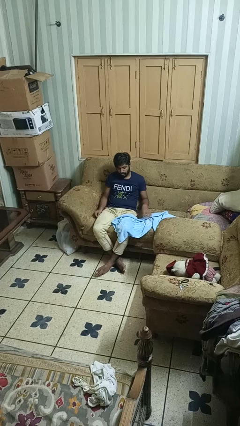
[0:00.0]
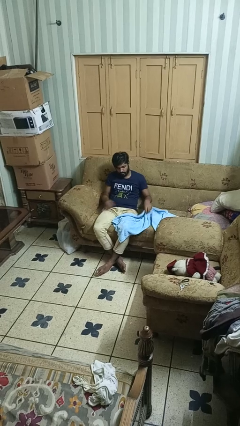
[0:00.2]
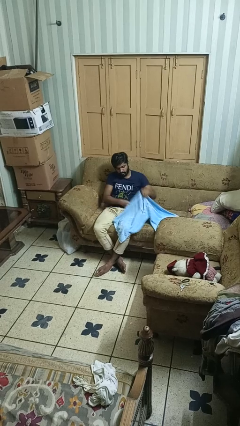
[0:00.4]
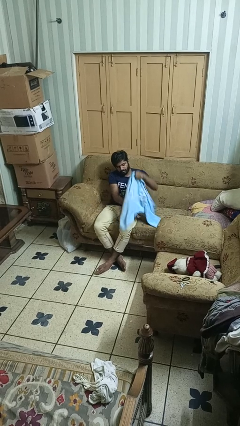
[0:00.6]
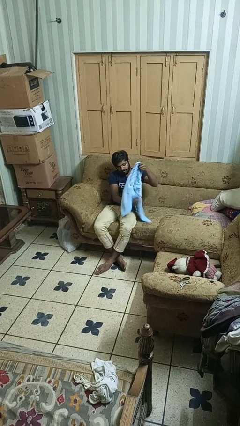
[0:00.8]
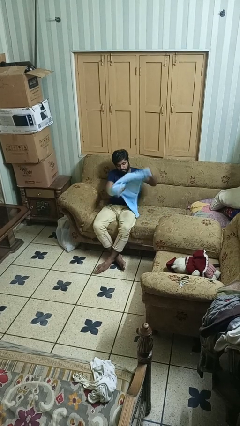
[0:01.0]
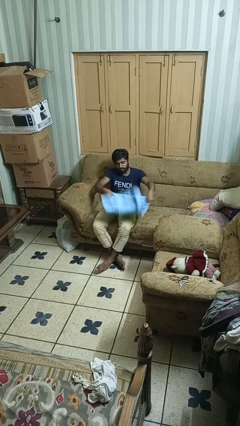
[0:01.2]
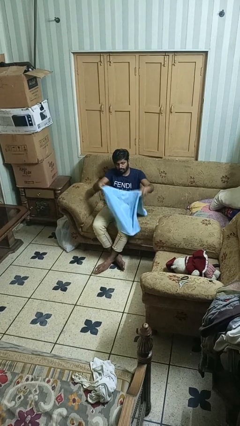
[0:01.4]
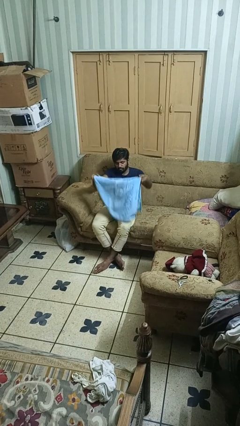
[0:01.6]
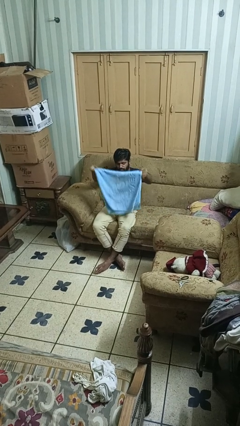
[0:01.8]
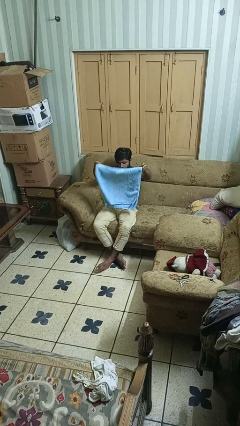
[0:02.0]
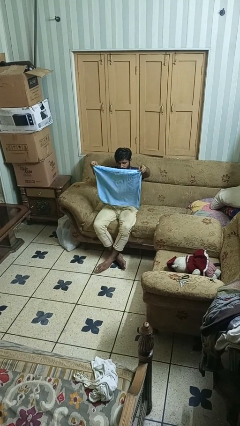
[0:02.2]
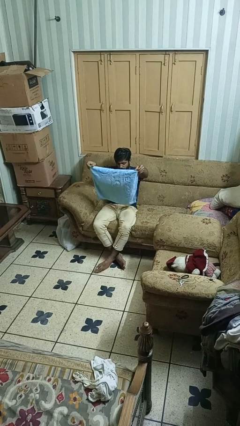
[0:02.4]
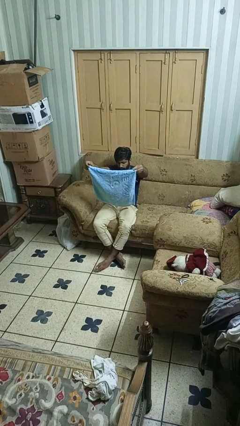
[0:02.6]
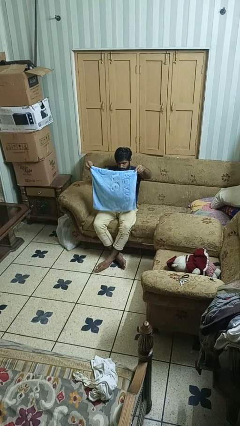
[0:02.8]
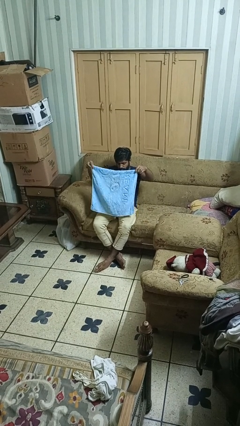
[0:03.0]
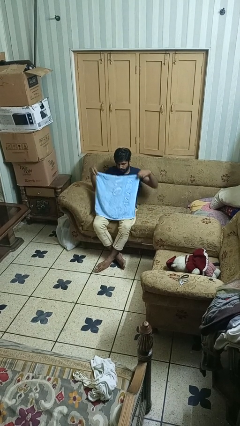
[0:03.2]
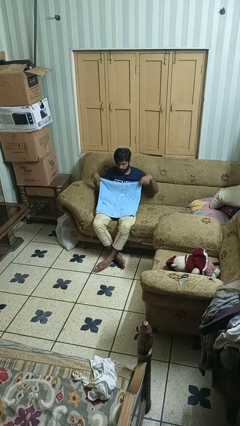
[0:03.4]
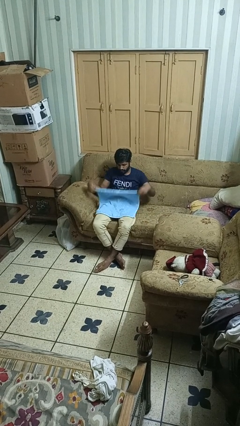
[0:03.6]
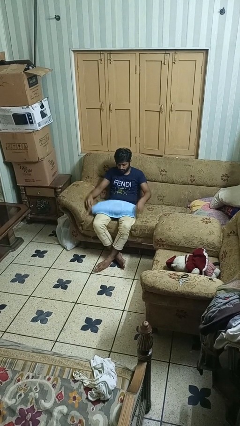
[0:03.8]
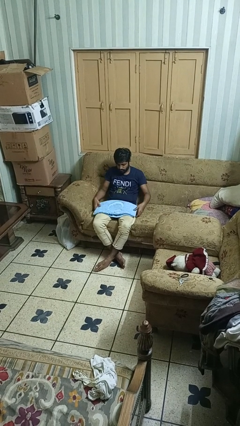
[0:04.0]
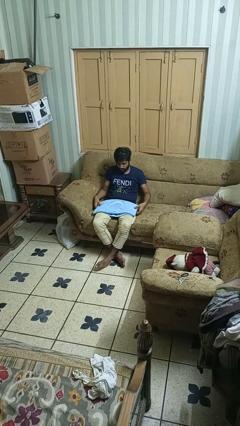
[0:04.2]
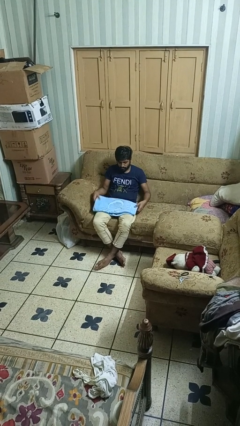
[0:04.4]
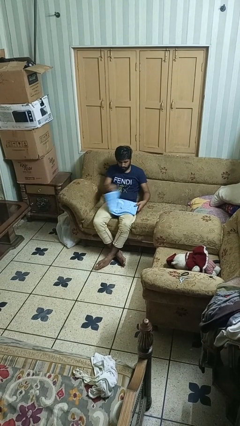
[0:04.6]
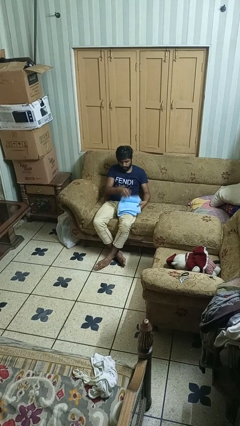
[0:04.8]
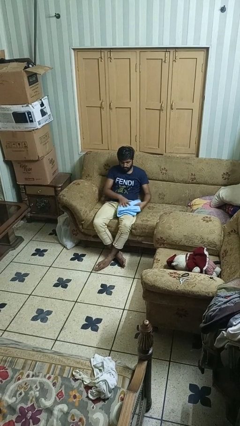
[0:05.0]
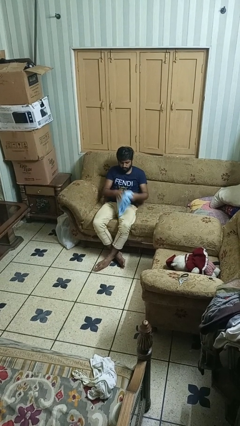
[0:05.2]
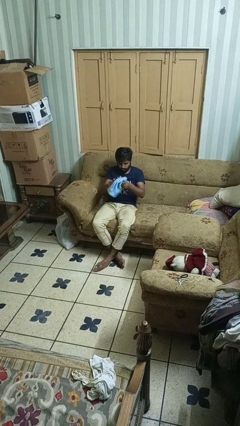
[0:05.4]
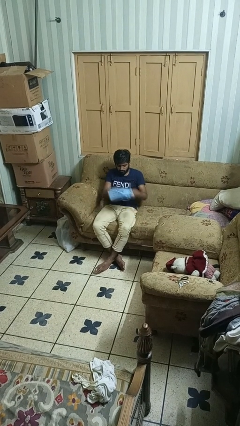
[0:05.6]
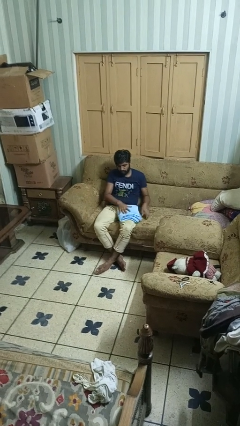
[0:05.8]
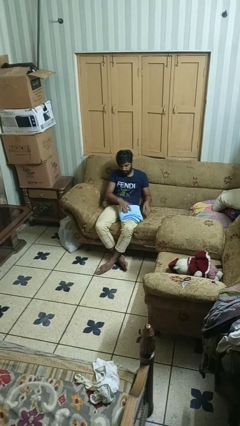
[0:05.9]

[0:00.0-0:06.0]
person folds towel

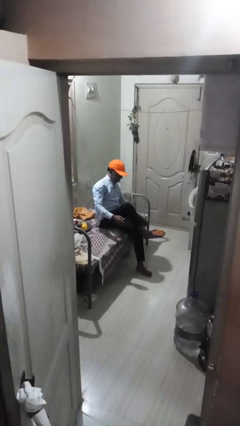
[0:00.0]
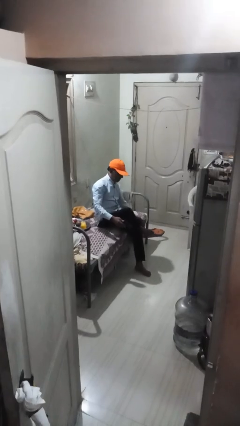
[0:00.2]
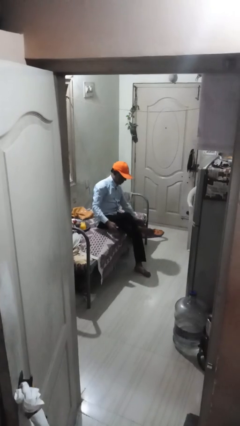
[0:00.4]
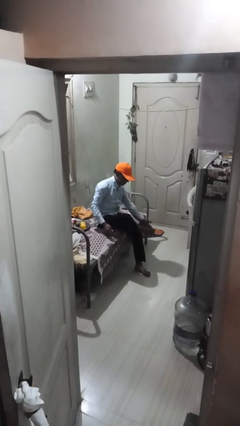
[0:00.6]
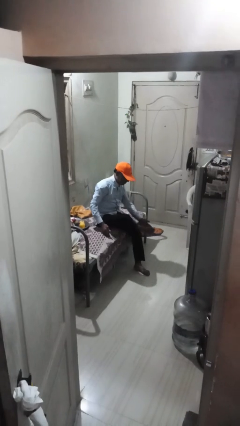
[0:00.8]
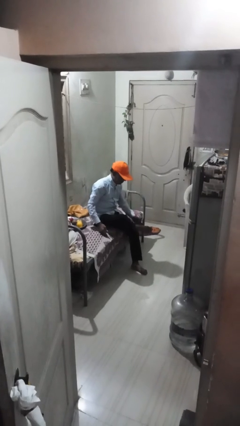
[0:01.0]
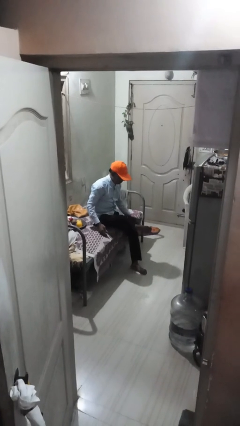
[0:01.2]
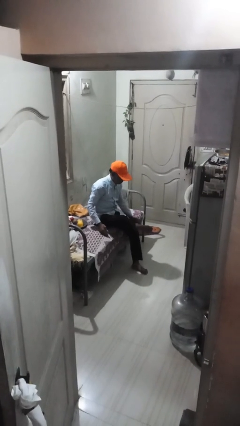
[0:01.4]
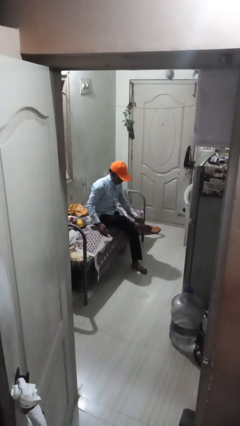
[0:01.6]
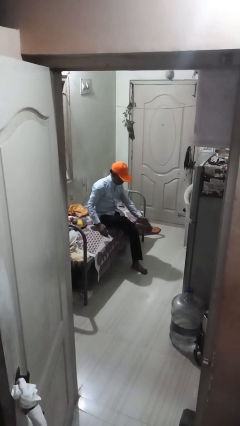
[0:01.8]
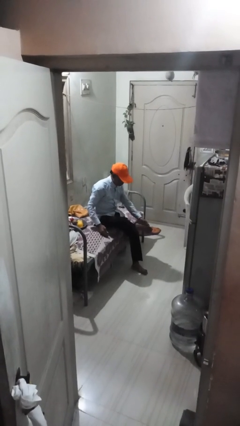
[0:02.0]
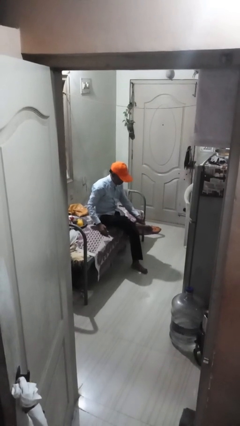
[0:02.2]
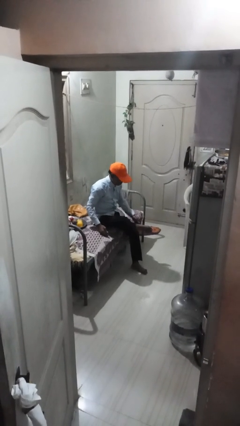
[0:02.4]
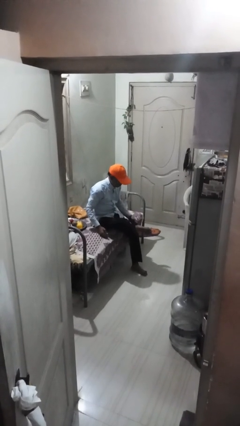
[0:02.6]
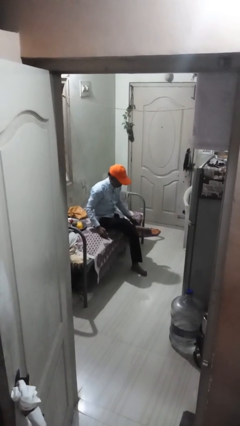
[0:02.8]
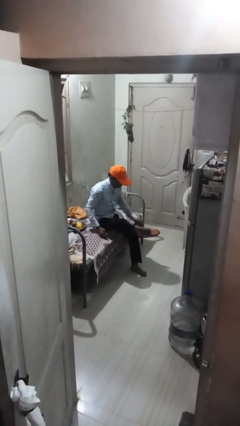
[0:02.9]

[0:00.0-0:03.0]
person rubs foot

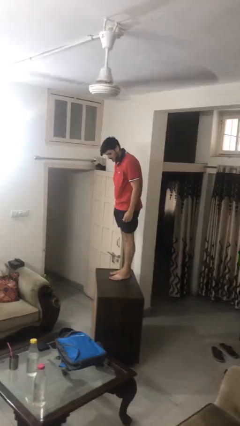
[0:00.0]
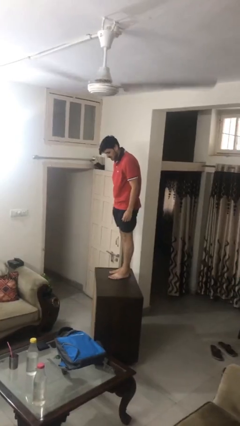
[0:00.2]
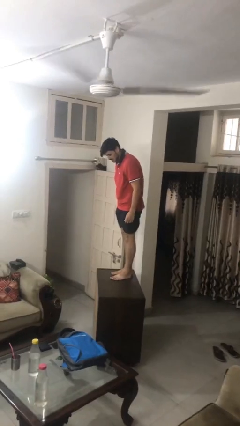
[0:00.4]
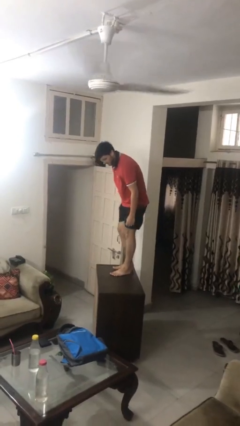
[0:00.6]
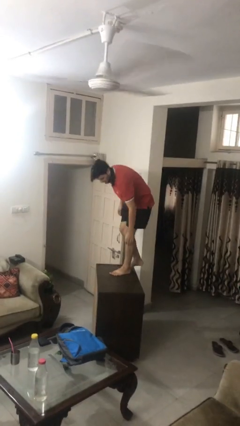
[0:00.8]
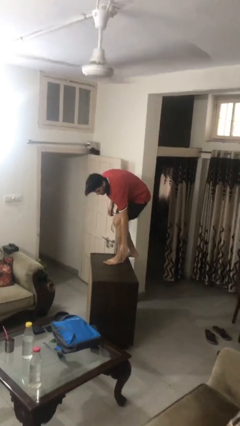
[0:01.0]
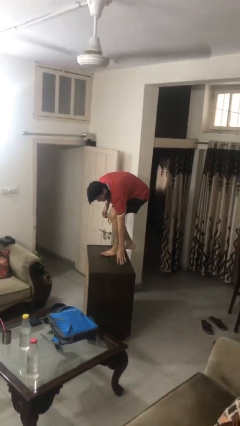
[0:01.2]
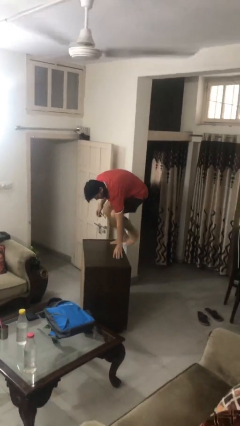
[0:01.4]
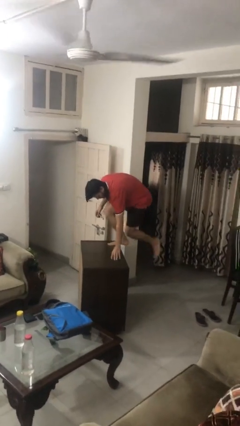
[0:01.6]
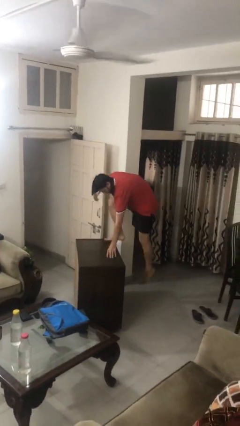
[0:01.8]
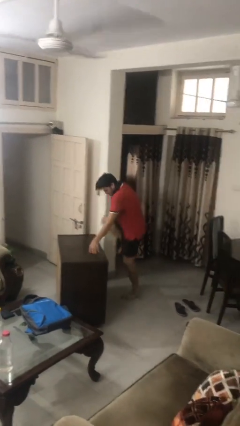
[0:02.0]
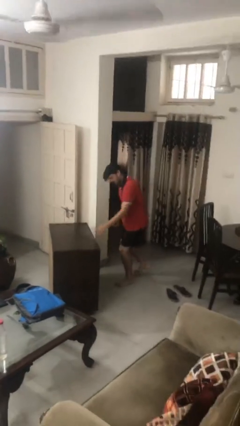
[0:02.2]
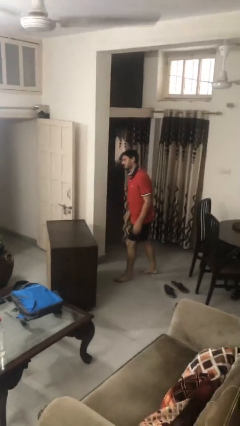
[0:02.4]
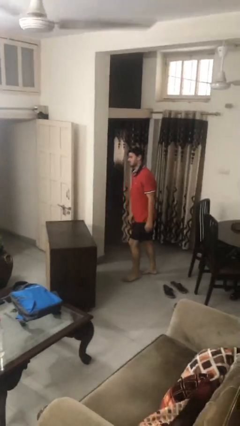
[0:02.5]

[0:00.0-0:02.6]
person climbs off table

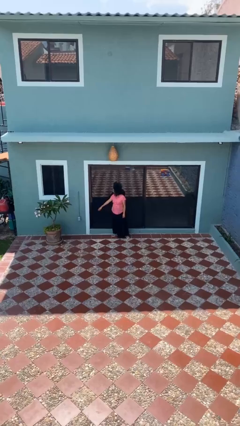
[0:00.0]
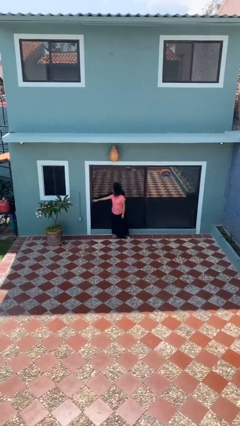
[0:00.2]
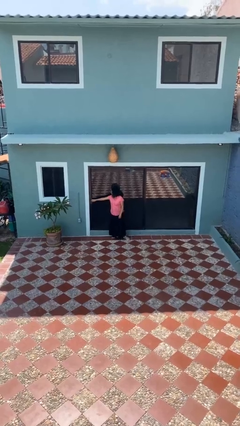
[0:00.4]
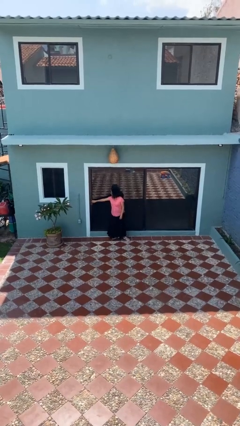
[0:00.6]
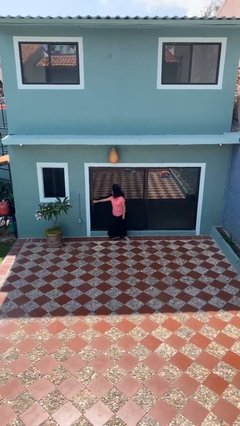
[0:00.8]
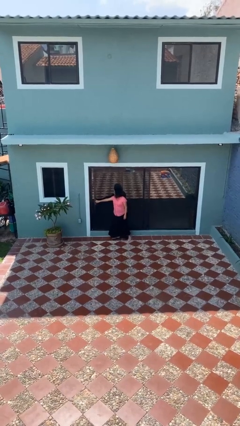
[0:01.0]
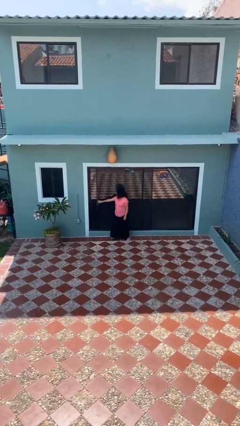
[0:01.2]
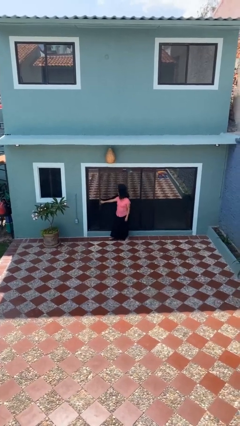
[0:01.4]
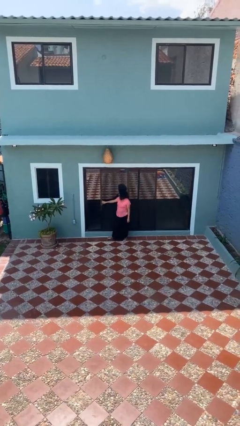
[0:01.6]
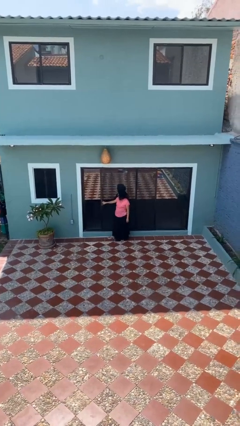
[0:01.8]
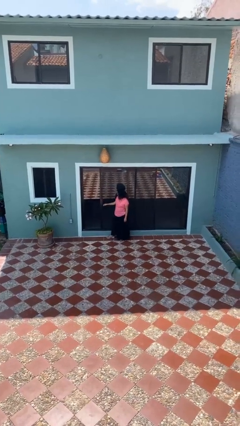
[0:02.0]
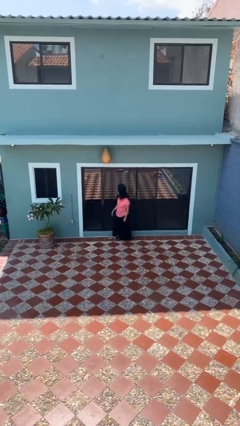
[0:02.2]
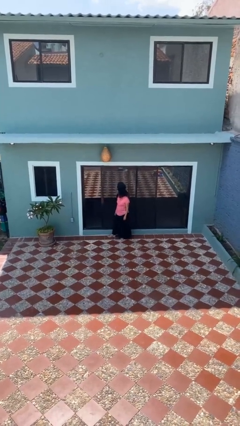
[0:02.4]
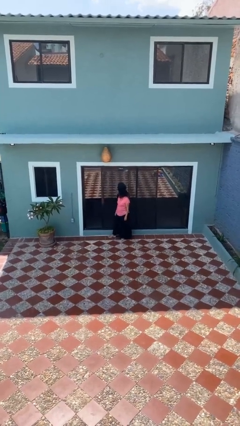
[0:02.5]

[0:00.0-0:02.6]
person opens sliding door

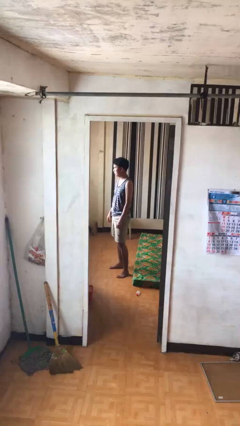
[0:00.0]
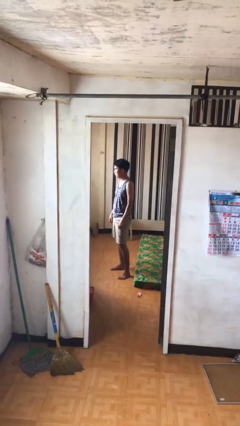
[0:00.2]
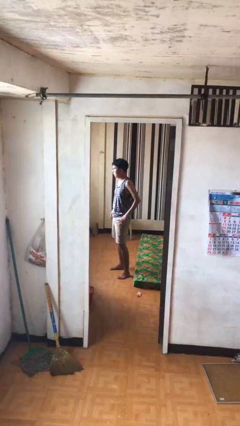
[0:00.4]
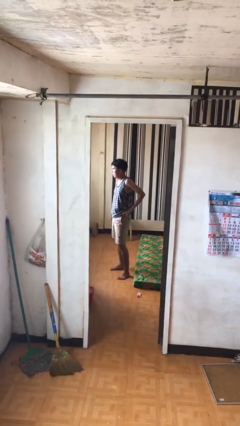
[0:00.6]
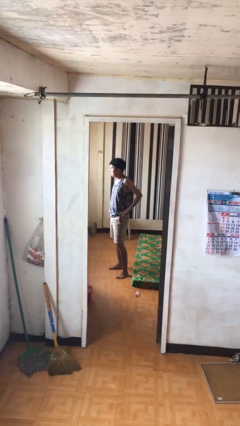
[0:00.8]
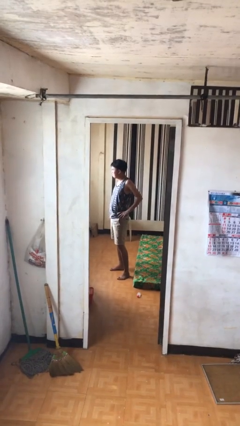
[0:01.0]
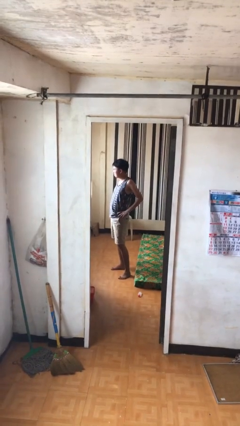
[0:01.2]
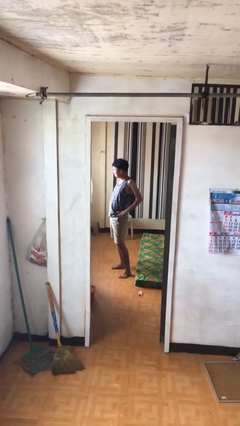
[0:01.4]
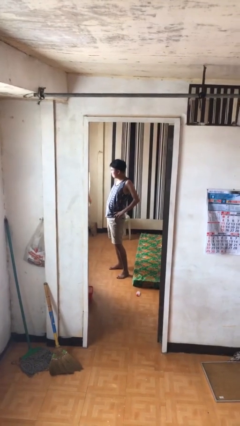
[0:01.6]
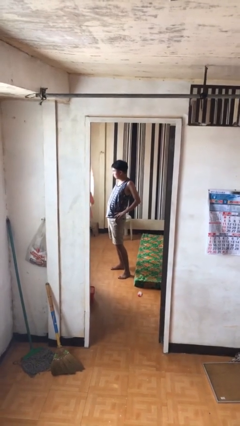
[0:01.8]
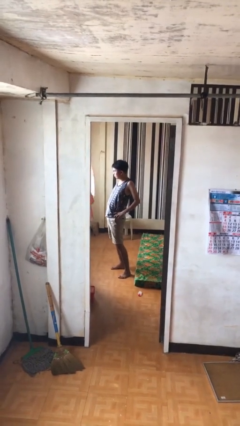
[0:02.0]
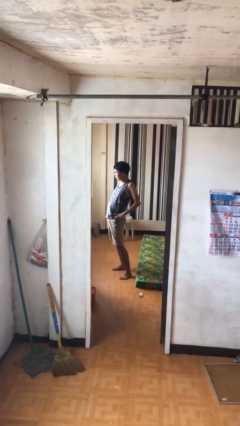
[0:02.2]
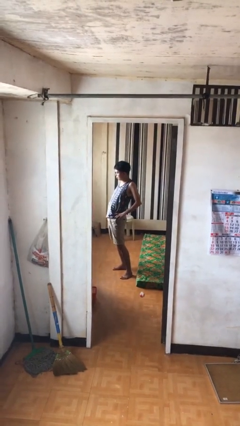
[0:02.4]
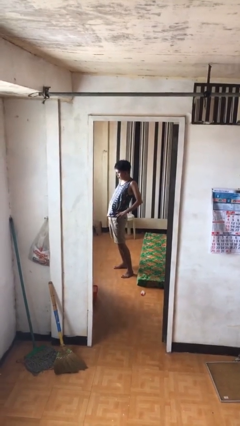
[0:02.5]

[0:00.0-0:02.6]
person stretches back

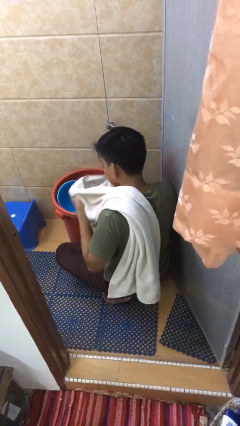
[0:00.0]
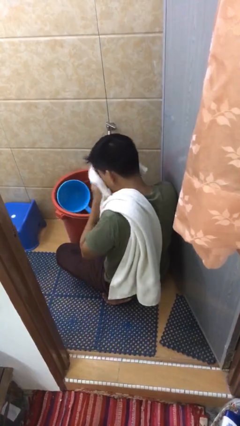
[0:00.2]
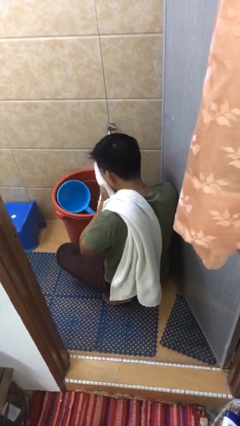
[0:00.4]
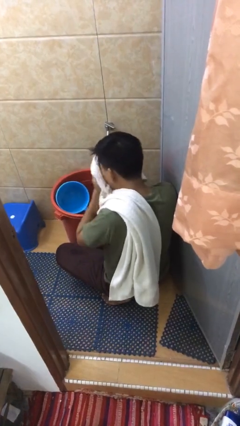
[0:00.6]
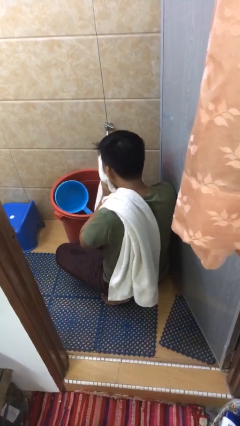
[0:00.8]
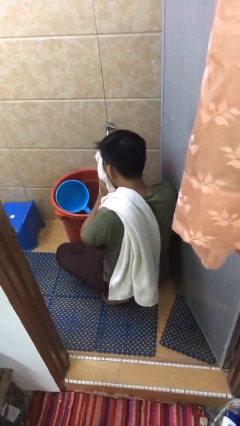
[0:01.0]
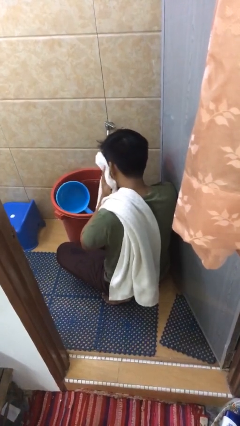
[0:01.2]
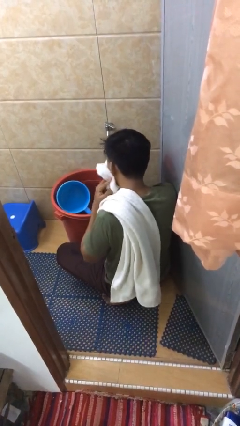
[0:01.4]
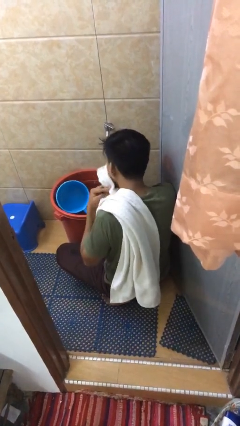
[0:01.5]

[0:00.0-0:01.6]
person dries face with towel
